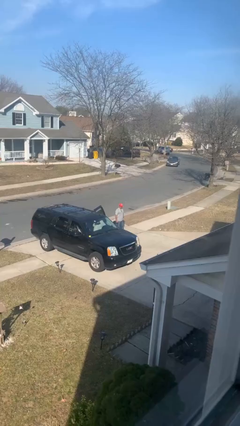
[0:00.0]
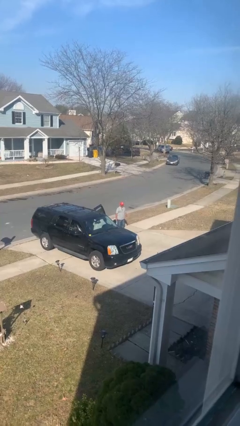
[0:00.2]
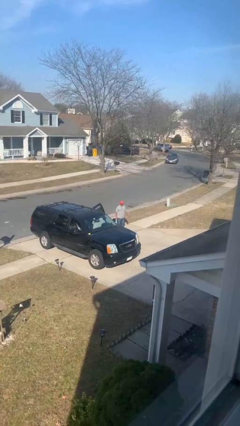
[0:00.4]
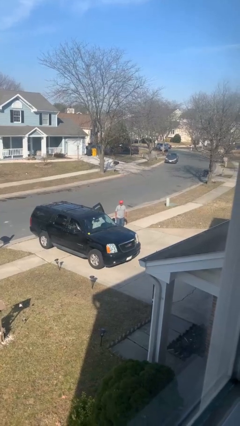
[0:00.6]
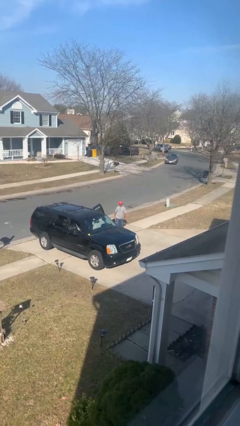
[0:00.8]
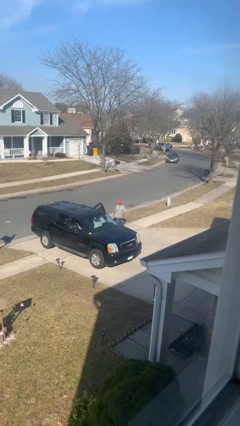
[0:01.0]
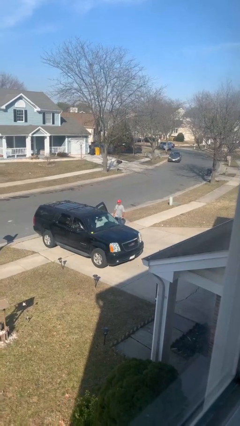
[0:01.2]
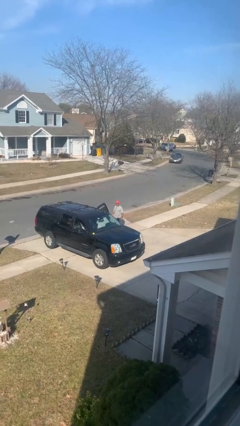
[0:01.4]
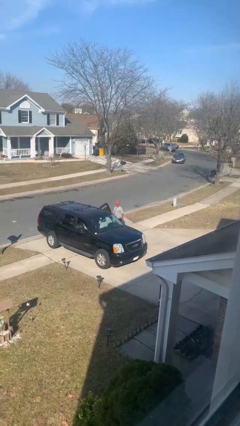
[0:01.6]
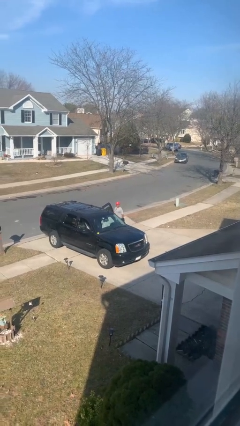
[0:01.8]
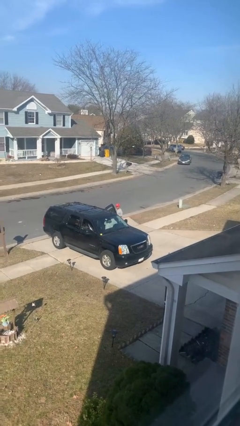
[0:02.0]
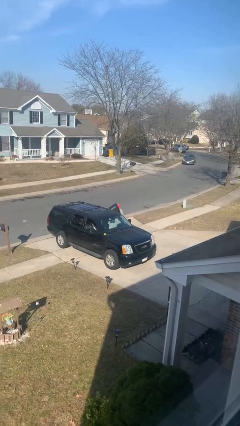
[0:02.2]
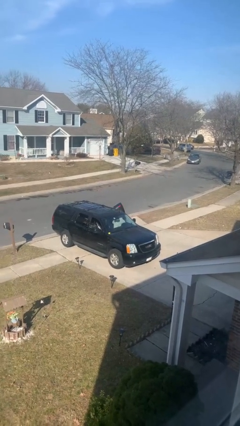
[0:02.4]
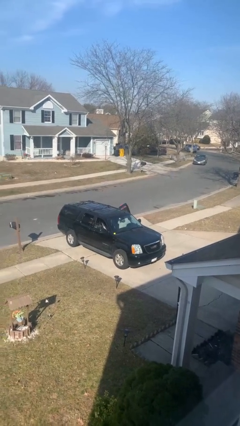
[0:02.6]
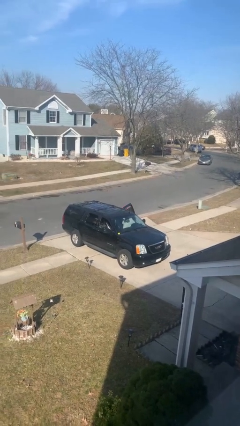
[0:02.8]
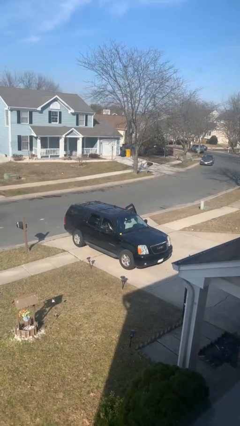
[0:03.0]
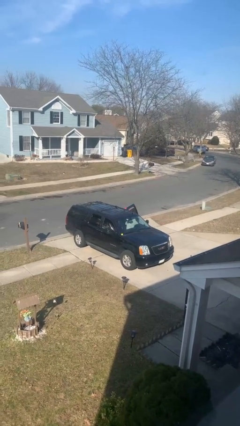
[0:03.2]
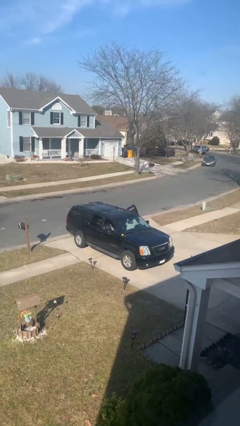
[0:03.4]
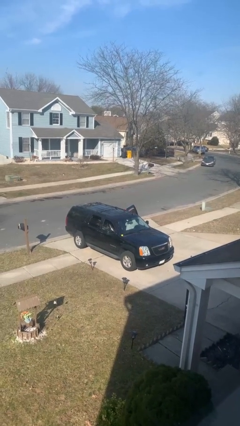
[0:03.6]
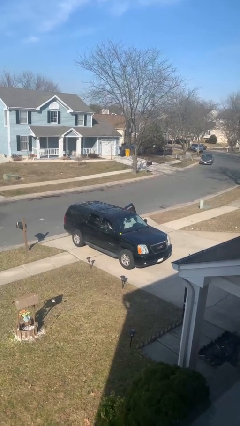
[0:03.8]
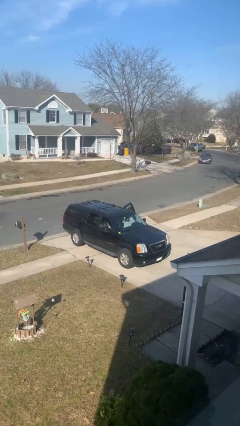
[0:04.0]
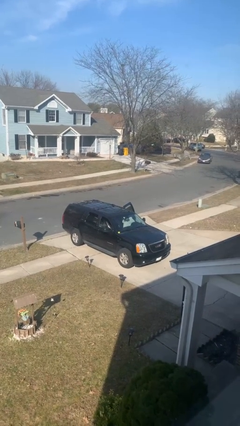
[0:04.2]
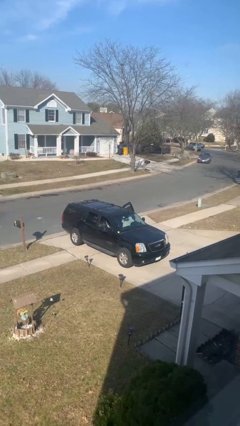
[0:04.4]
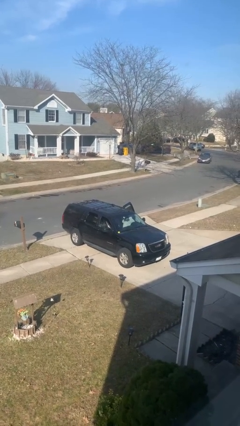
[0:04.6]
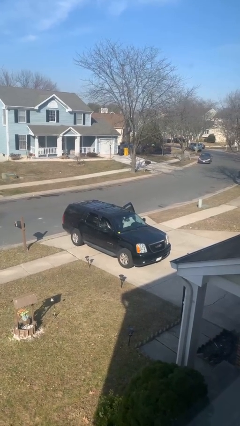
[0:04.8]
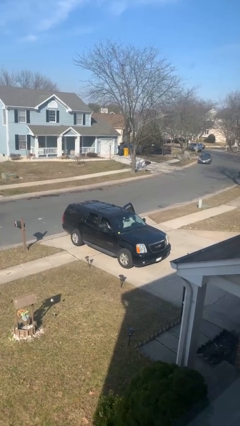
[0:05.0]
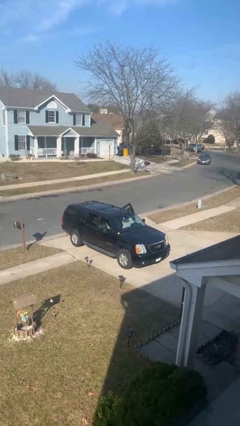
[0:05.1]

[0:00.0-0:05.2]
person enters car

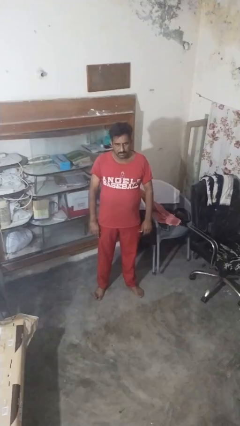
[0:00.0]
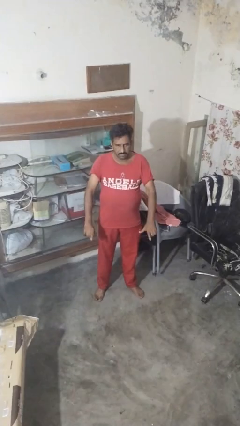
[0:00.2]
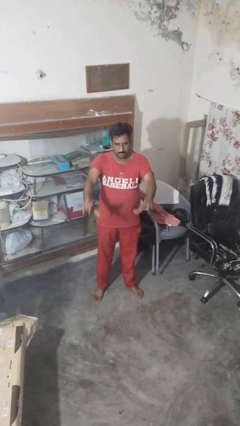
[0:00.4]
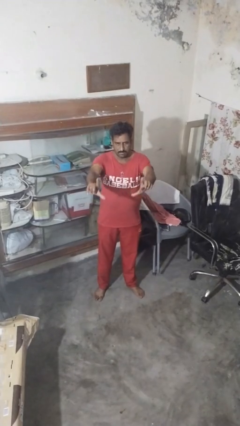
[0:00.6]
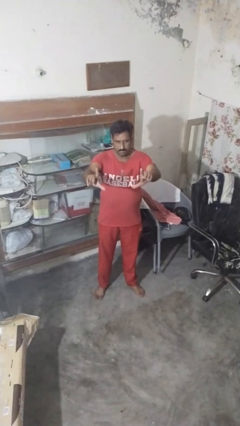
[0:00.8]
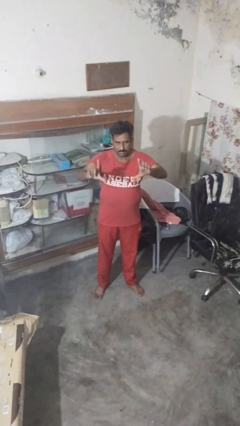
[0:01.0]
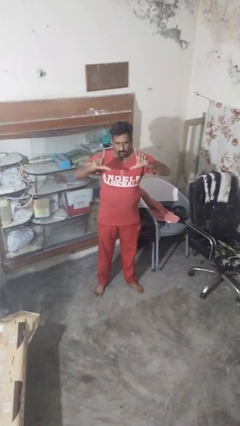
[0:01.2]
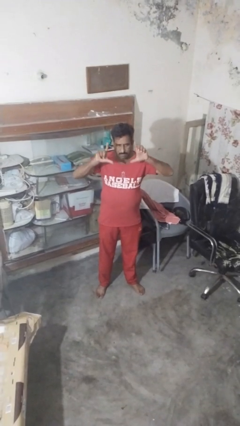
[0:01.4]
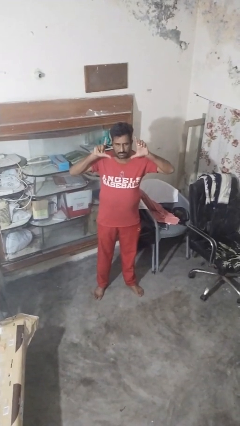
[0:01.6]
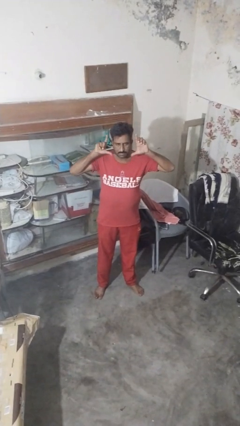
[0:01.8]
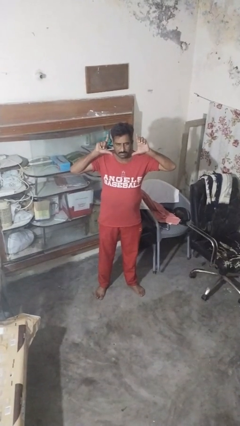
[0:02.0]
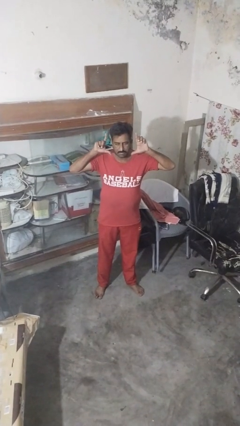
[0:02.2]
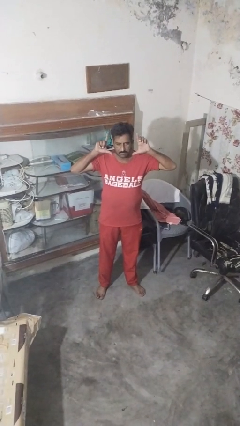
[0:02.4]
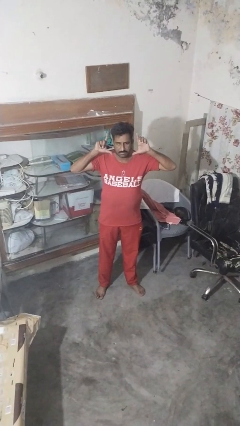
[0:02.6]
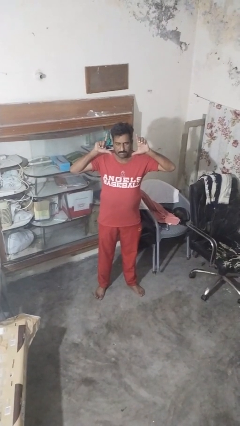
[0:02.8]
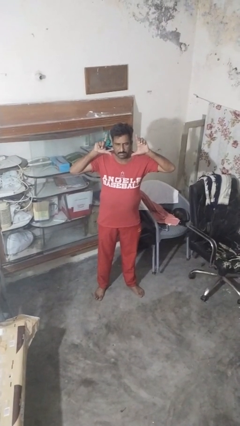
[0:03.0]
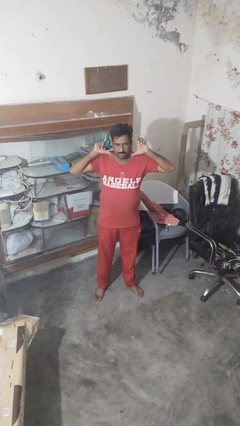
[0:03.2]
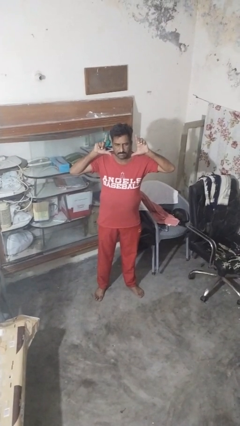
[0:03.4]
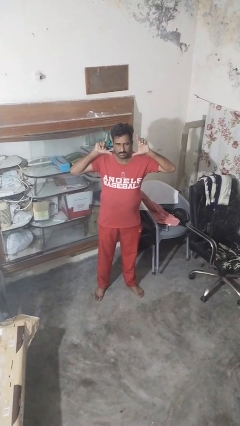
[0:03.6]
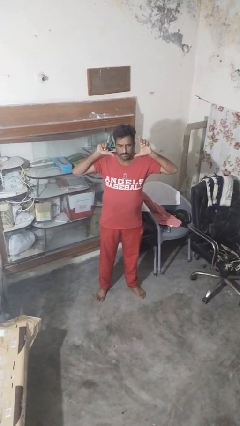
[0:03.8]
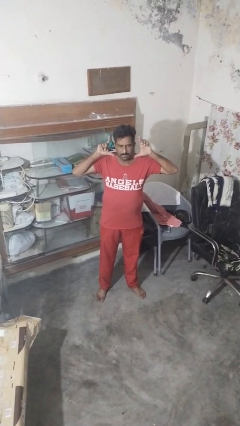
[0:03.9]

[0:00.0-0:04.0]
person gestures zoom in

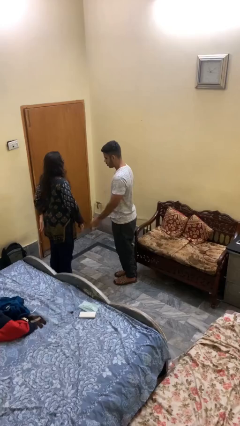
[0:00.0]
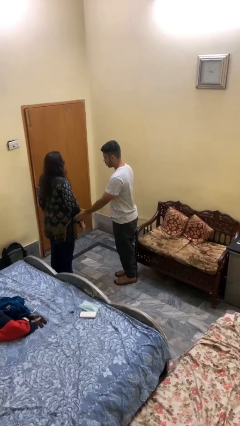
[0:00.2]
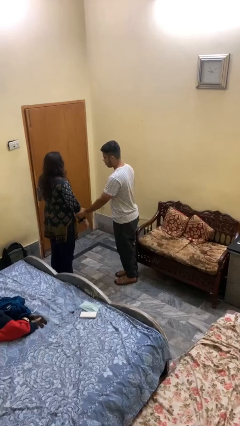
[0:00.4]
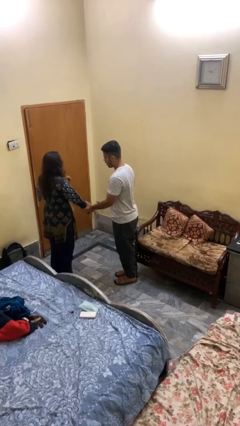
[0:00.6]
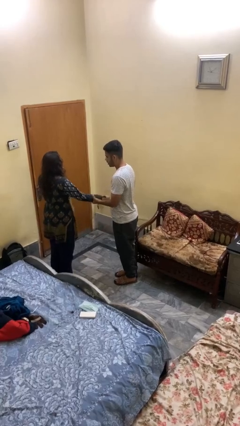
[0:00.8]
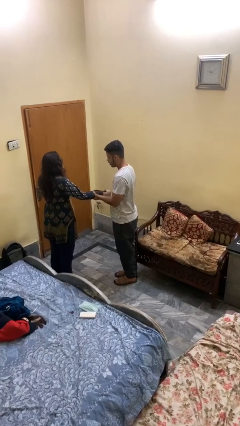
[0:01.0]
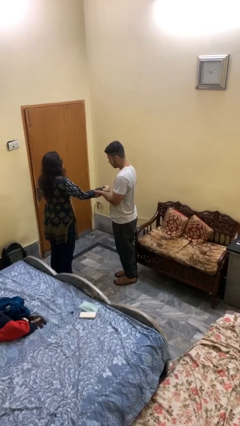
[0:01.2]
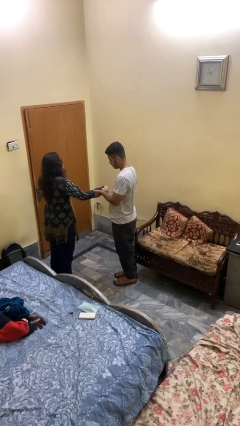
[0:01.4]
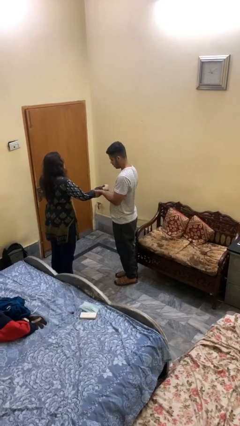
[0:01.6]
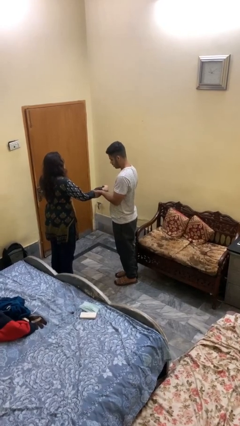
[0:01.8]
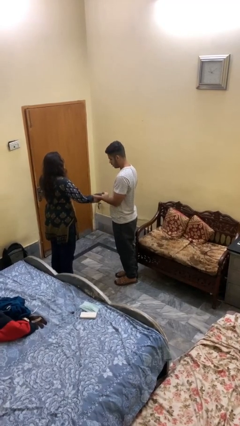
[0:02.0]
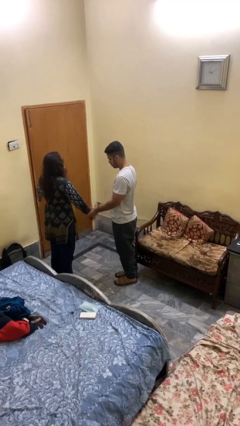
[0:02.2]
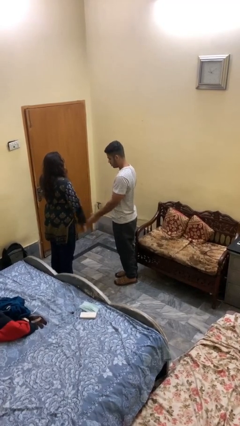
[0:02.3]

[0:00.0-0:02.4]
person grabs person by forearm

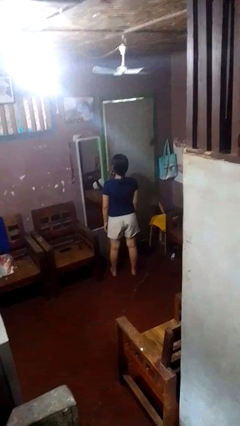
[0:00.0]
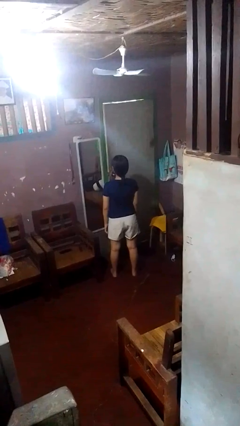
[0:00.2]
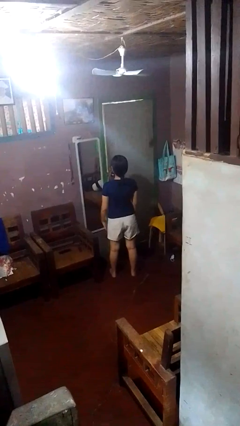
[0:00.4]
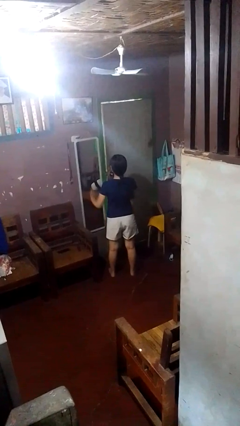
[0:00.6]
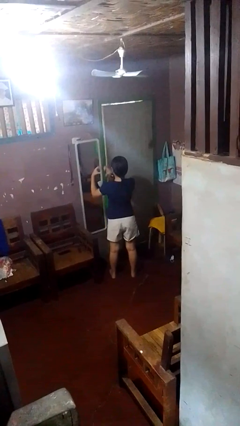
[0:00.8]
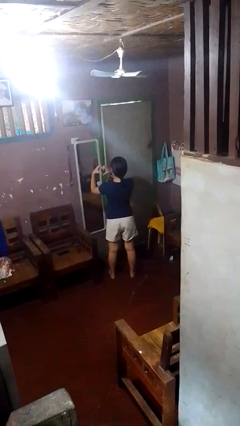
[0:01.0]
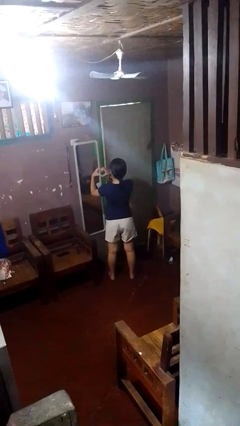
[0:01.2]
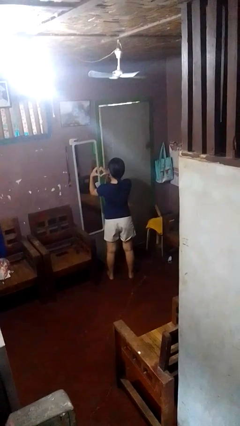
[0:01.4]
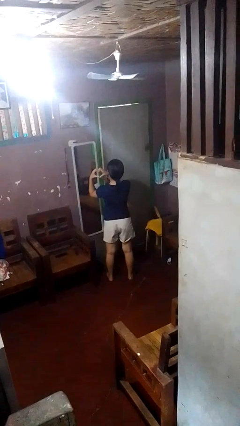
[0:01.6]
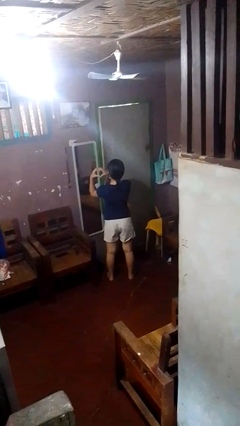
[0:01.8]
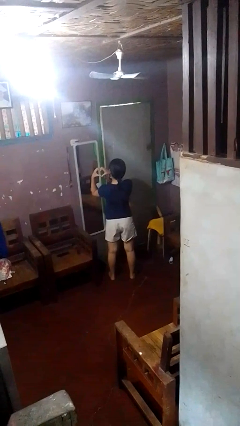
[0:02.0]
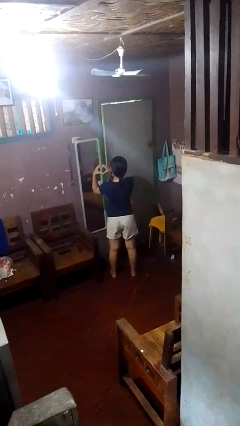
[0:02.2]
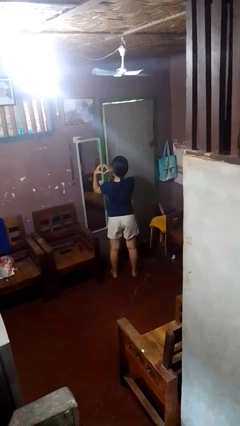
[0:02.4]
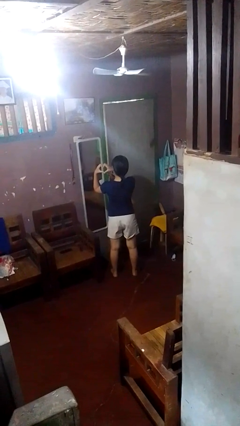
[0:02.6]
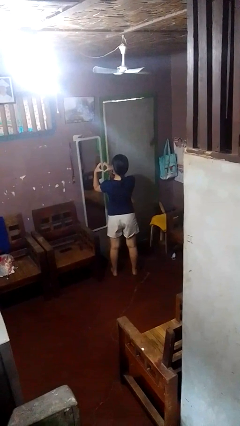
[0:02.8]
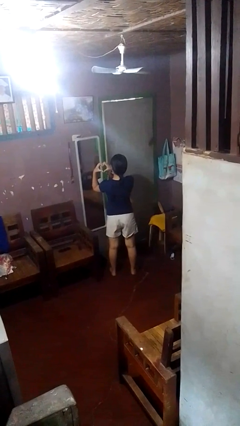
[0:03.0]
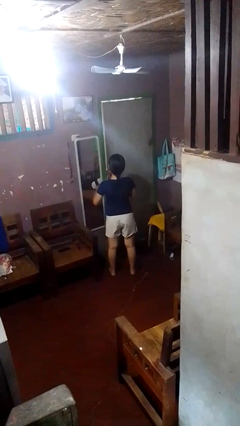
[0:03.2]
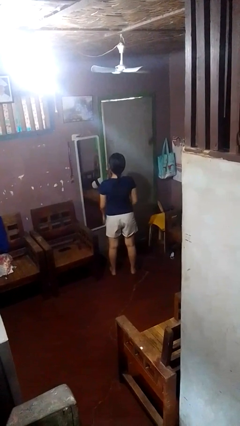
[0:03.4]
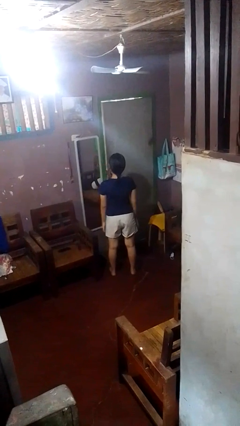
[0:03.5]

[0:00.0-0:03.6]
person gestures heart

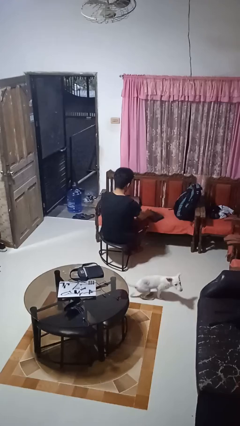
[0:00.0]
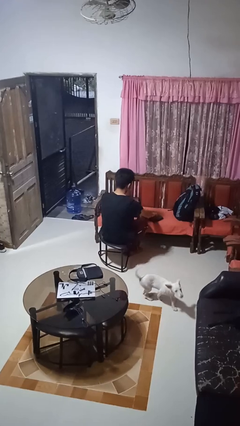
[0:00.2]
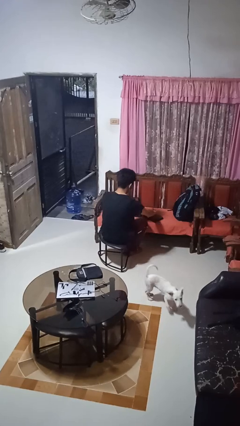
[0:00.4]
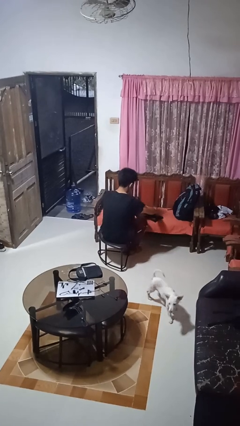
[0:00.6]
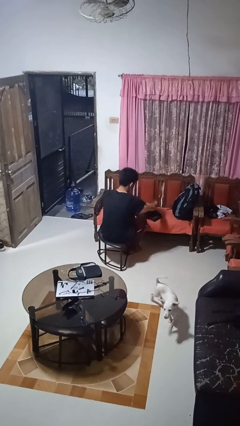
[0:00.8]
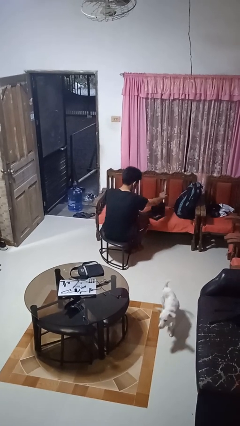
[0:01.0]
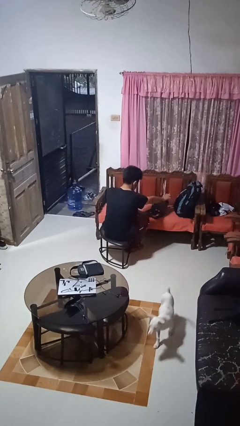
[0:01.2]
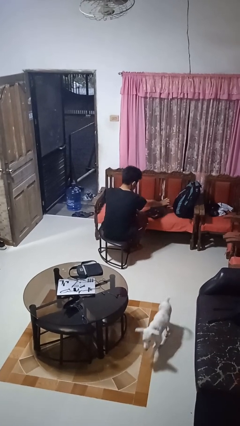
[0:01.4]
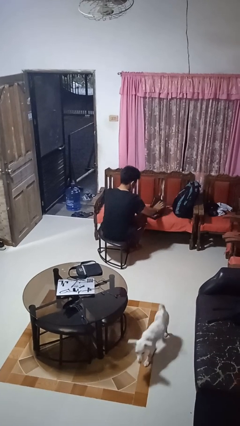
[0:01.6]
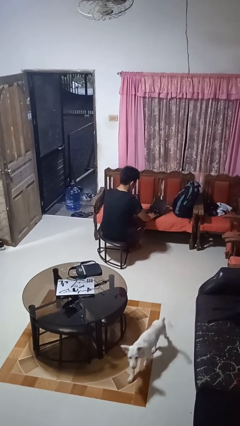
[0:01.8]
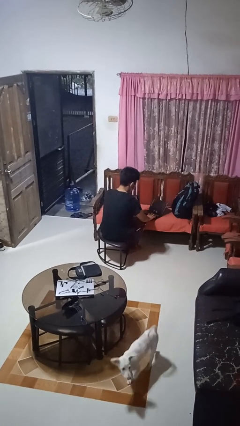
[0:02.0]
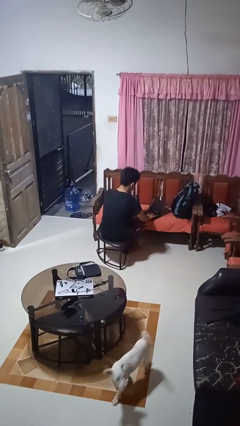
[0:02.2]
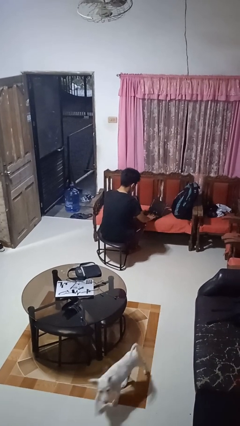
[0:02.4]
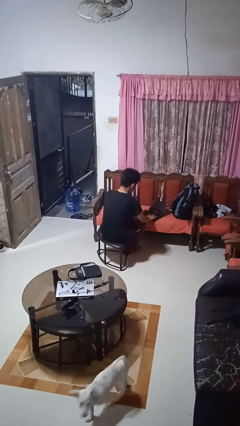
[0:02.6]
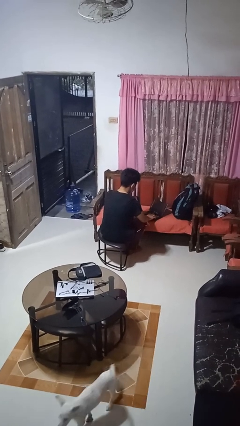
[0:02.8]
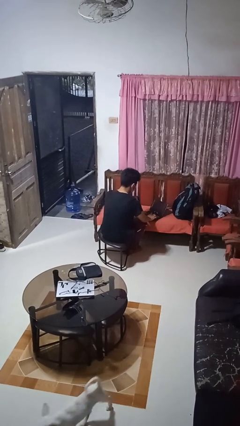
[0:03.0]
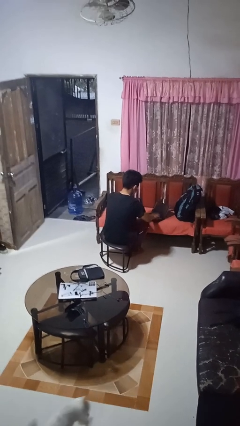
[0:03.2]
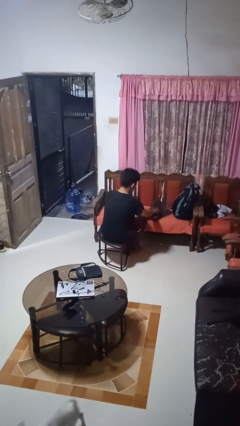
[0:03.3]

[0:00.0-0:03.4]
person opens laptop
